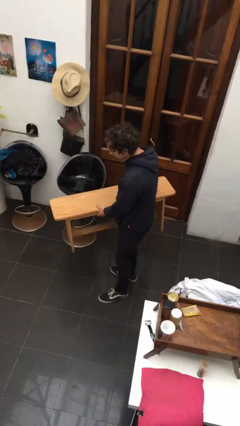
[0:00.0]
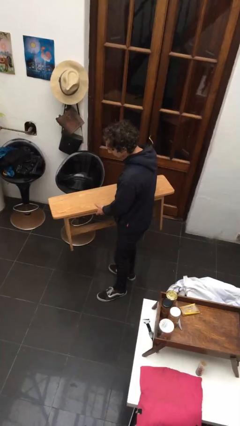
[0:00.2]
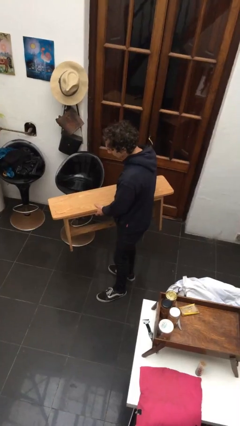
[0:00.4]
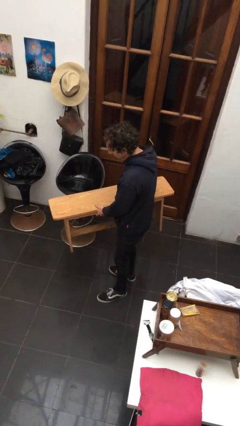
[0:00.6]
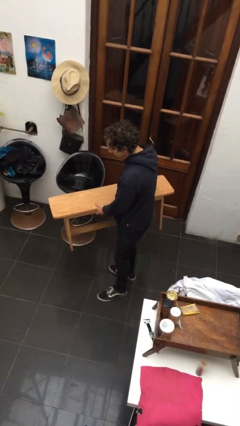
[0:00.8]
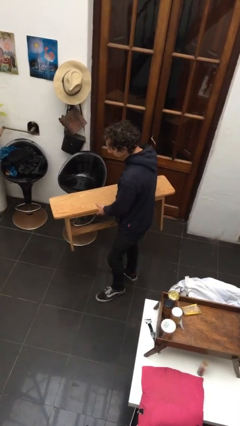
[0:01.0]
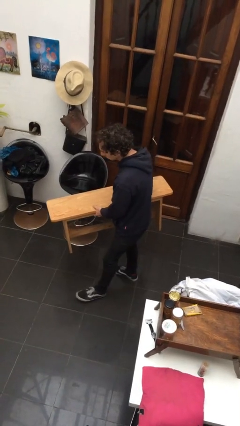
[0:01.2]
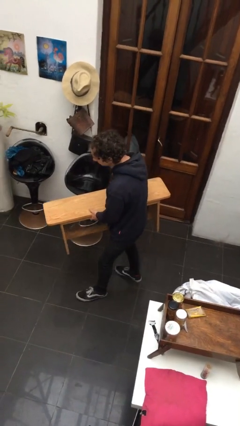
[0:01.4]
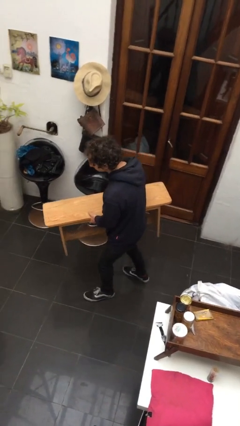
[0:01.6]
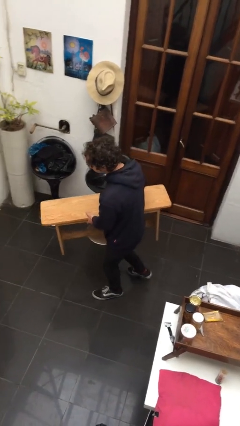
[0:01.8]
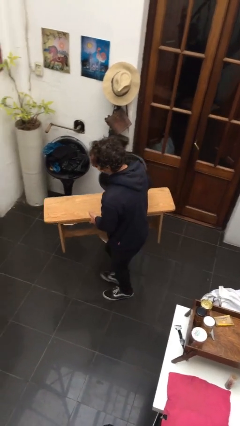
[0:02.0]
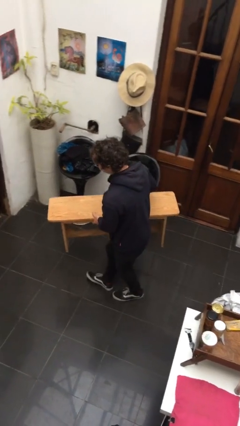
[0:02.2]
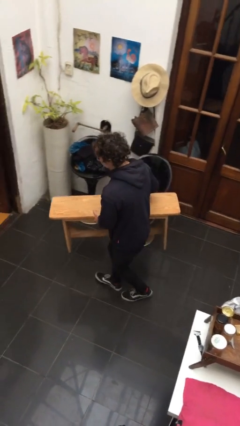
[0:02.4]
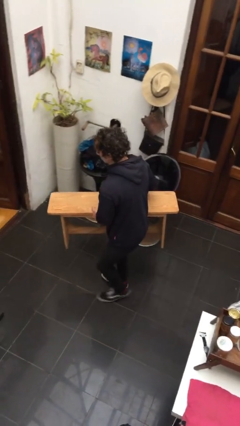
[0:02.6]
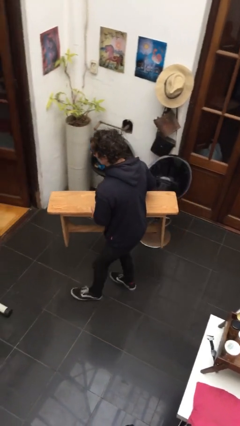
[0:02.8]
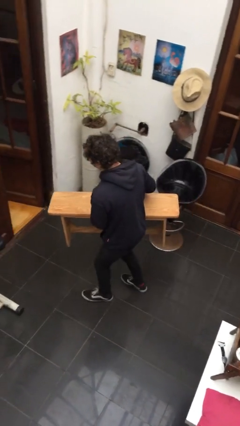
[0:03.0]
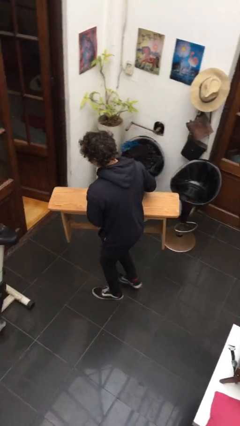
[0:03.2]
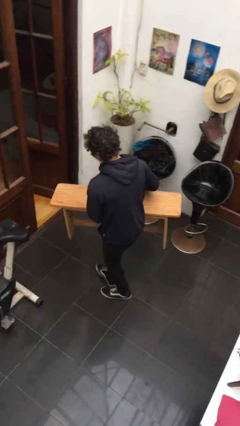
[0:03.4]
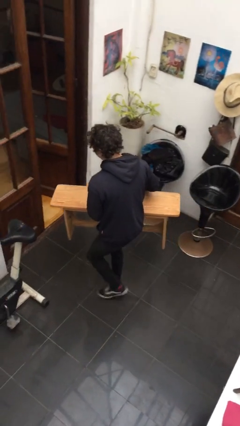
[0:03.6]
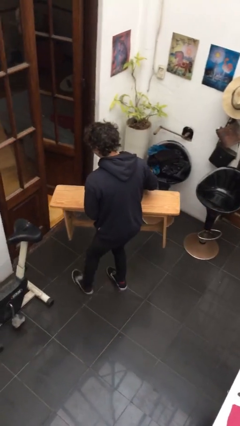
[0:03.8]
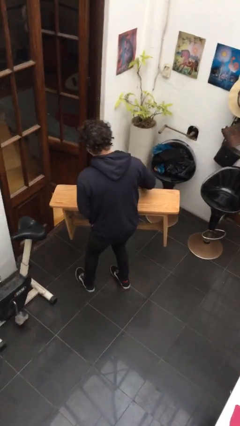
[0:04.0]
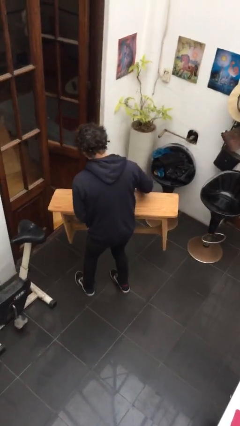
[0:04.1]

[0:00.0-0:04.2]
person carries furniture

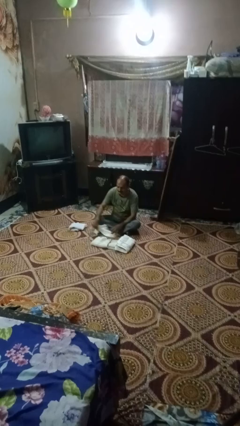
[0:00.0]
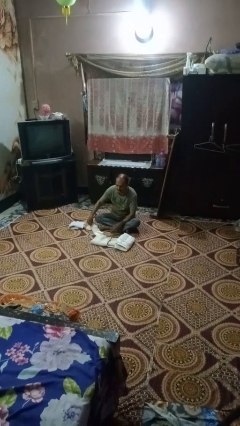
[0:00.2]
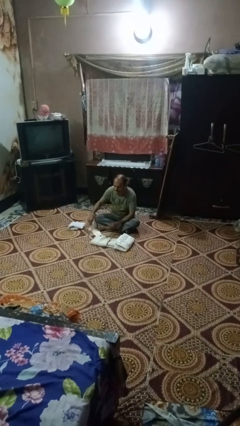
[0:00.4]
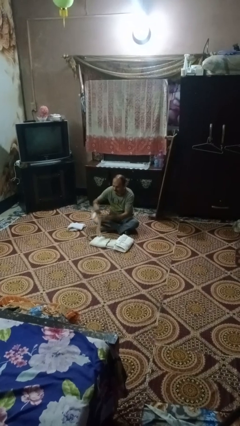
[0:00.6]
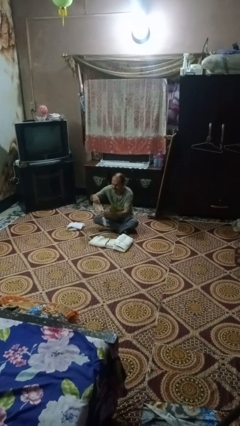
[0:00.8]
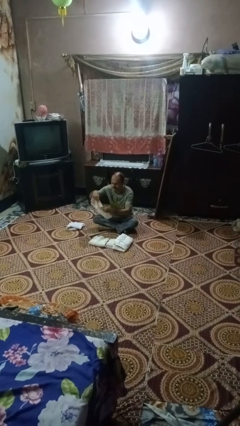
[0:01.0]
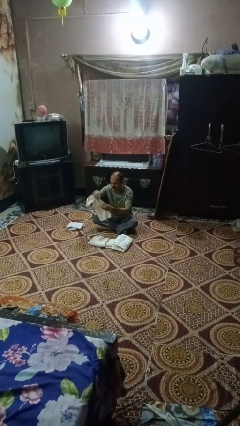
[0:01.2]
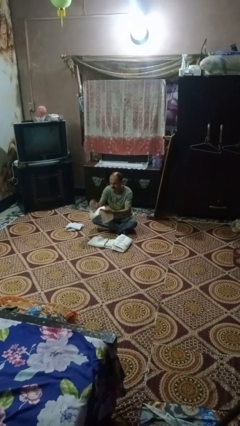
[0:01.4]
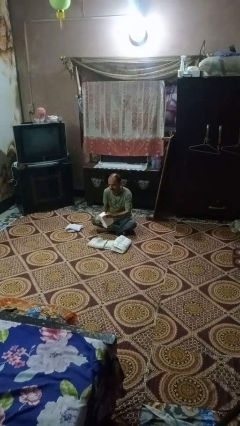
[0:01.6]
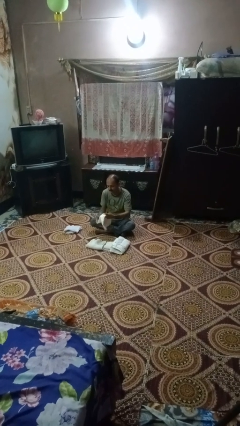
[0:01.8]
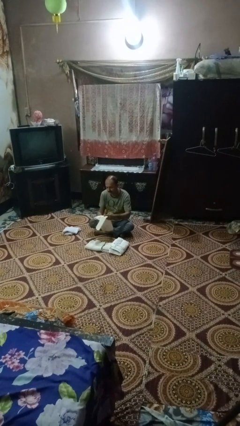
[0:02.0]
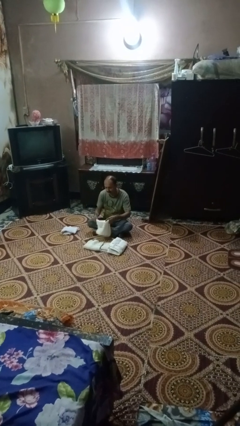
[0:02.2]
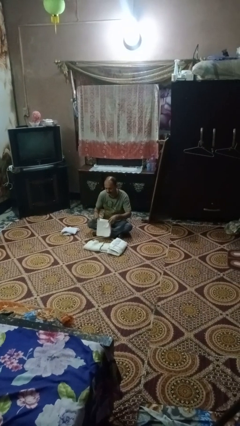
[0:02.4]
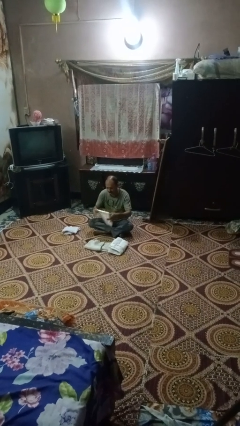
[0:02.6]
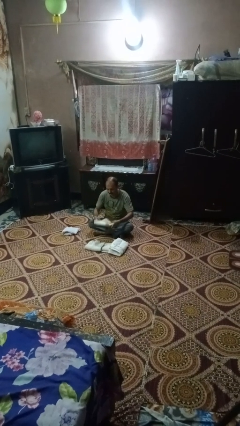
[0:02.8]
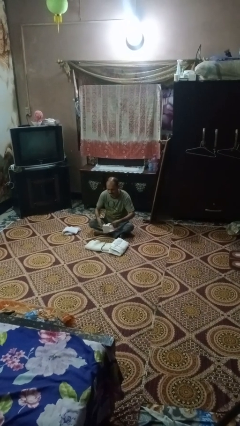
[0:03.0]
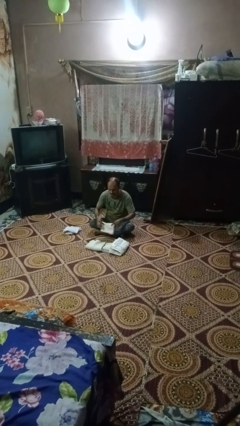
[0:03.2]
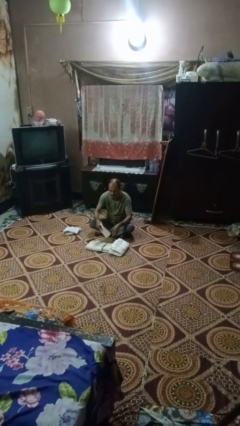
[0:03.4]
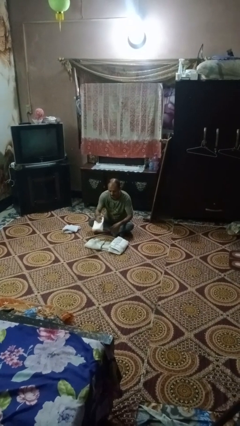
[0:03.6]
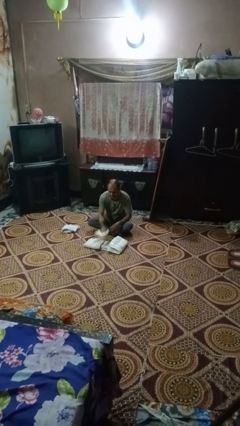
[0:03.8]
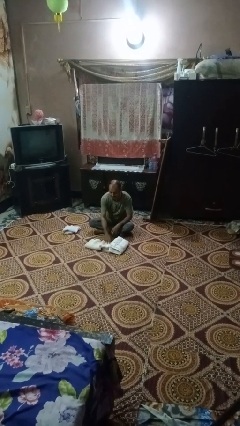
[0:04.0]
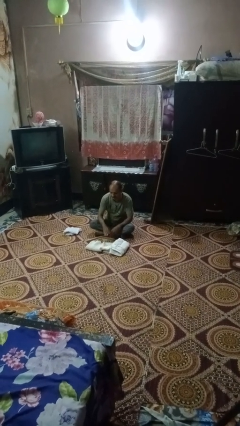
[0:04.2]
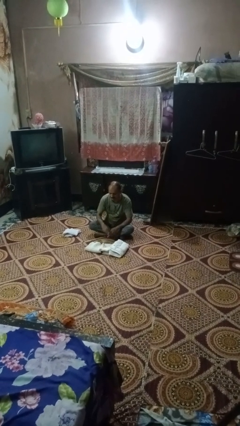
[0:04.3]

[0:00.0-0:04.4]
person folds towel

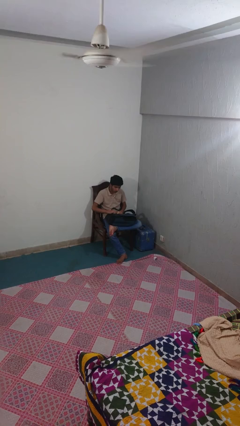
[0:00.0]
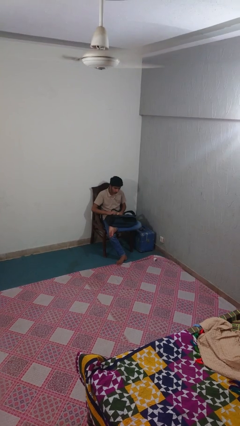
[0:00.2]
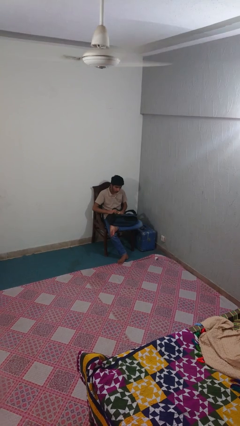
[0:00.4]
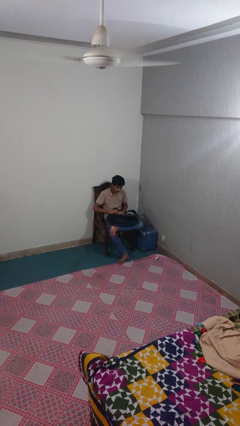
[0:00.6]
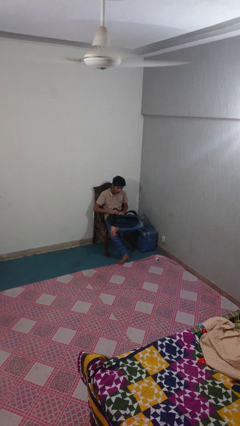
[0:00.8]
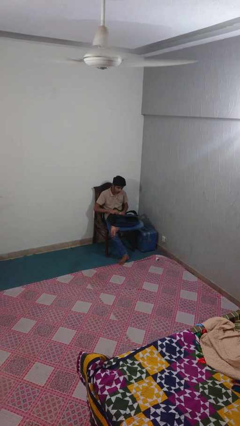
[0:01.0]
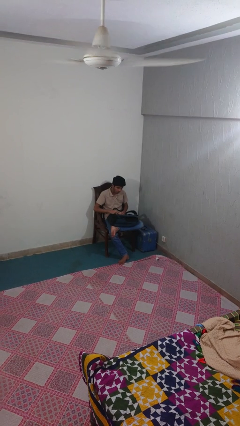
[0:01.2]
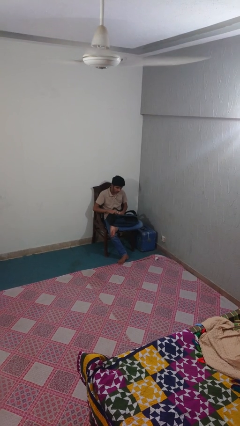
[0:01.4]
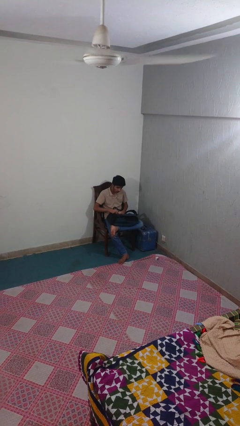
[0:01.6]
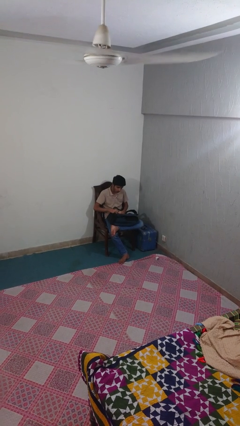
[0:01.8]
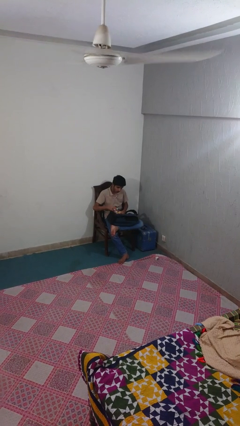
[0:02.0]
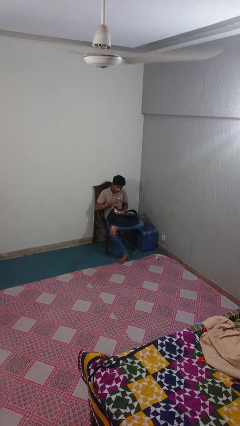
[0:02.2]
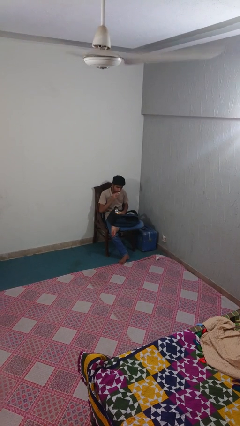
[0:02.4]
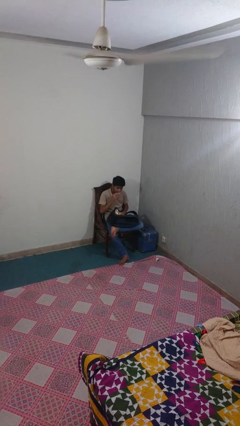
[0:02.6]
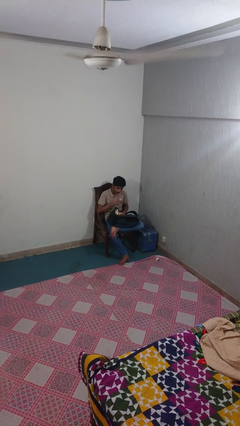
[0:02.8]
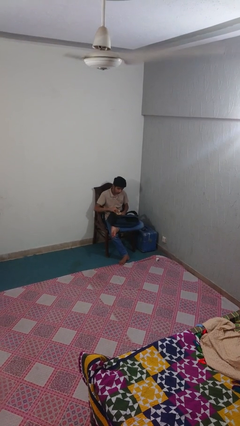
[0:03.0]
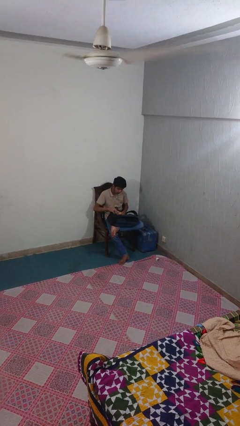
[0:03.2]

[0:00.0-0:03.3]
person eats snack from bag

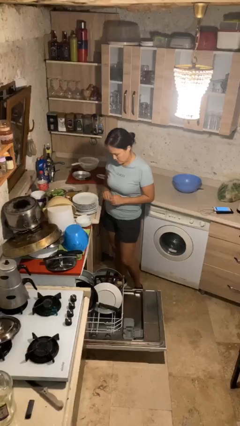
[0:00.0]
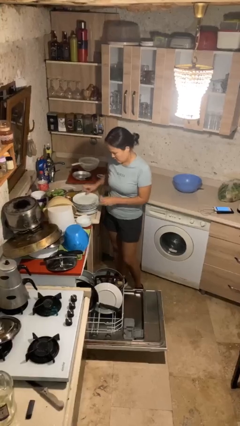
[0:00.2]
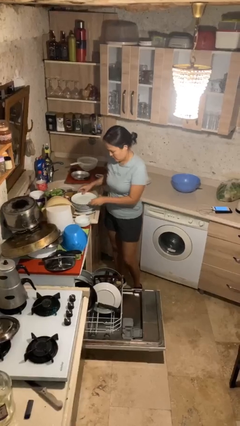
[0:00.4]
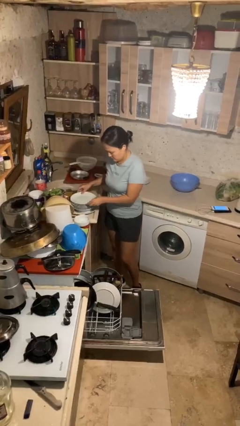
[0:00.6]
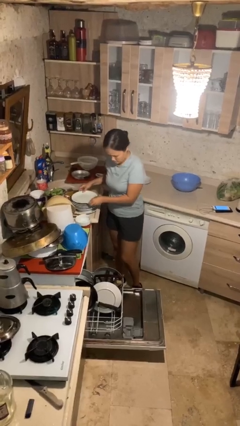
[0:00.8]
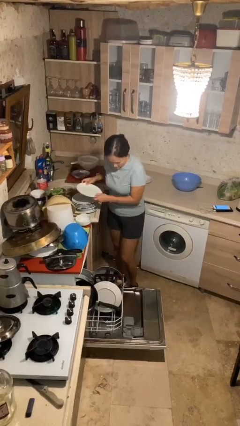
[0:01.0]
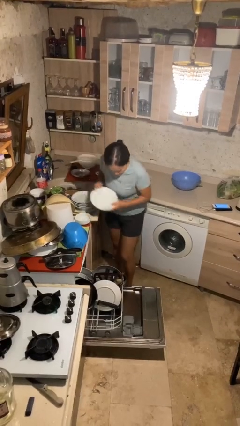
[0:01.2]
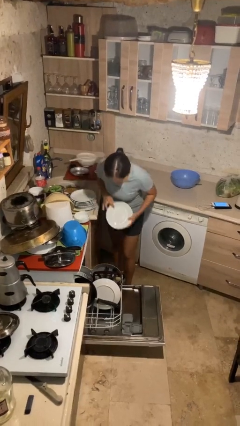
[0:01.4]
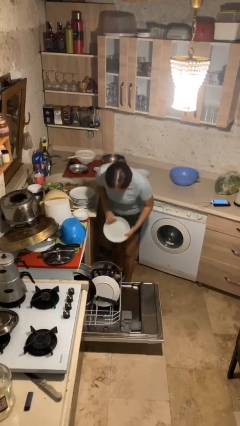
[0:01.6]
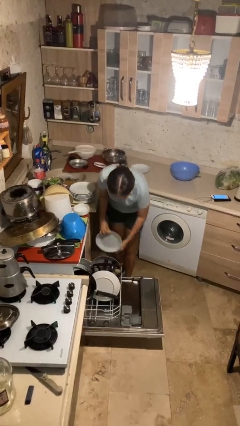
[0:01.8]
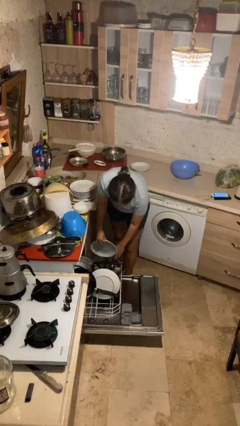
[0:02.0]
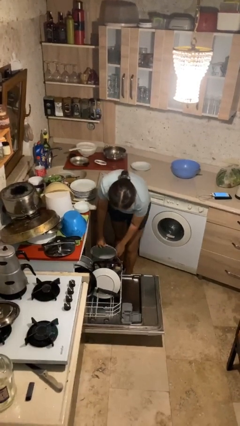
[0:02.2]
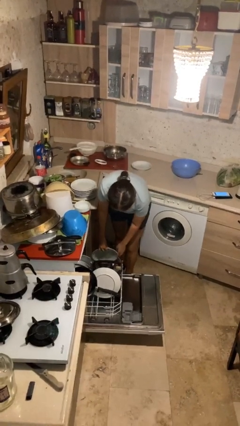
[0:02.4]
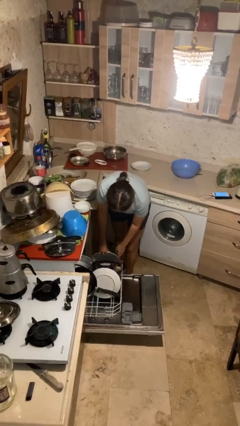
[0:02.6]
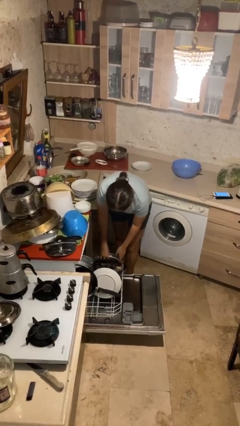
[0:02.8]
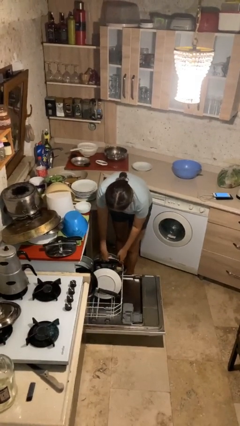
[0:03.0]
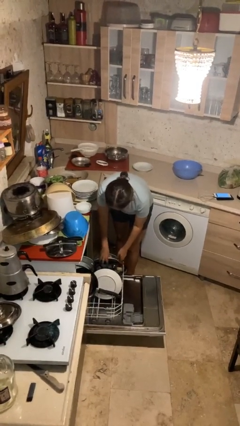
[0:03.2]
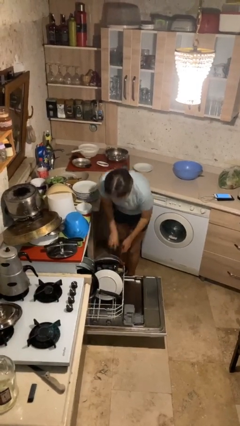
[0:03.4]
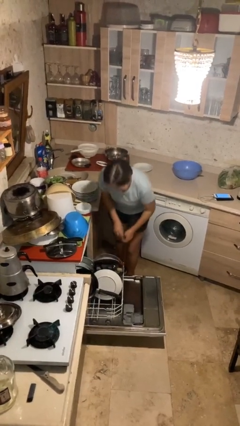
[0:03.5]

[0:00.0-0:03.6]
person loads dishwasher

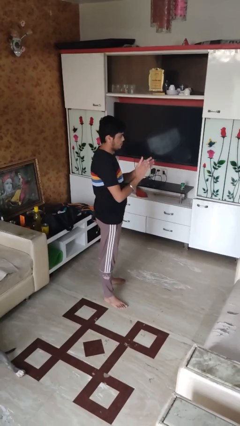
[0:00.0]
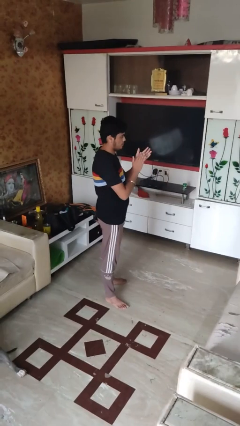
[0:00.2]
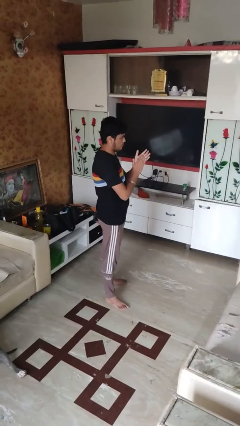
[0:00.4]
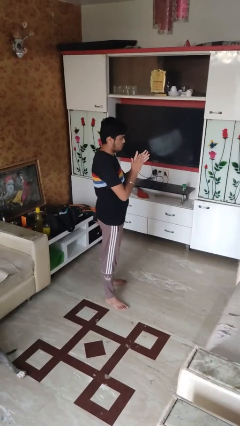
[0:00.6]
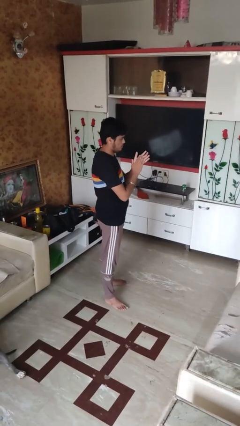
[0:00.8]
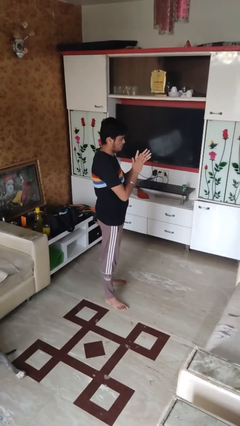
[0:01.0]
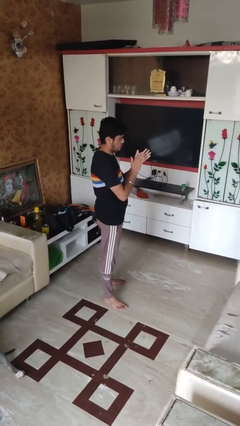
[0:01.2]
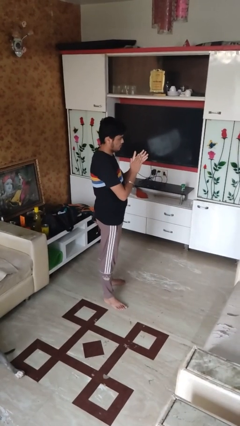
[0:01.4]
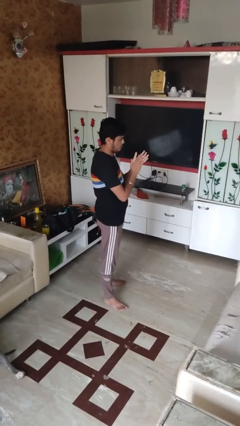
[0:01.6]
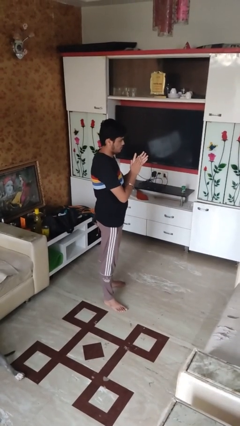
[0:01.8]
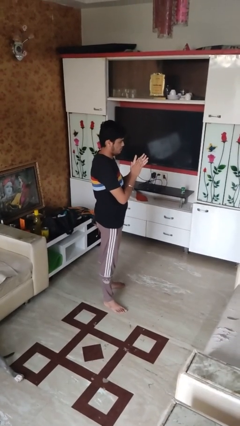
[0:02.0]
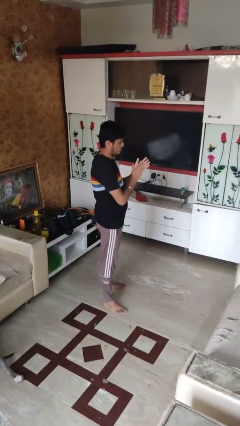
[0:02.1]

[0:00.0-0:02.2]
person claps hands
